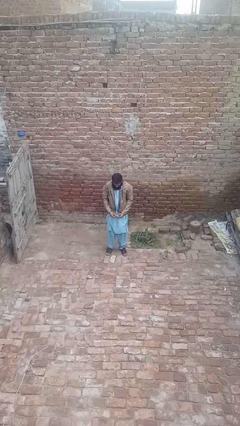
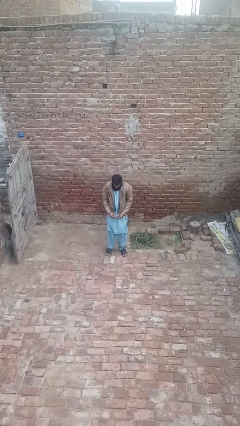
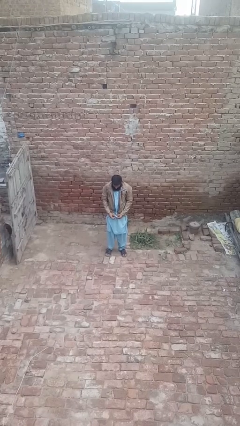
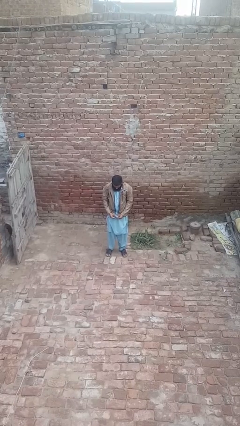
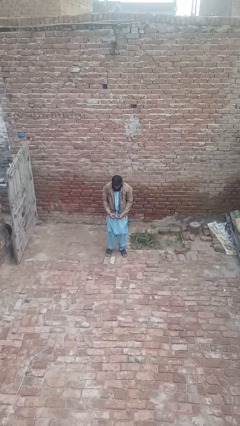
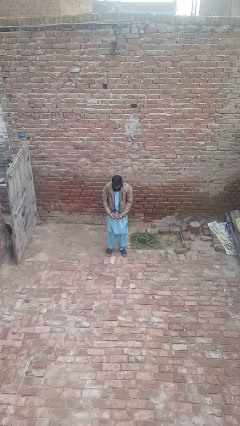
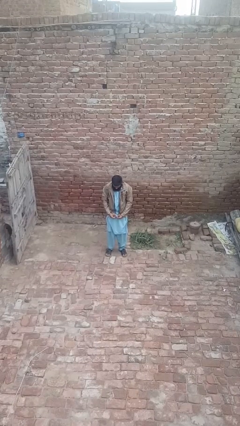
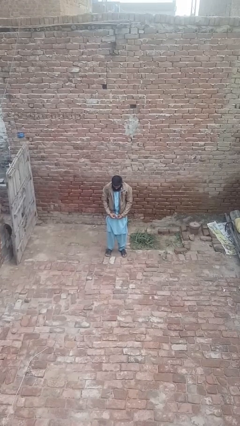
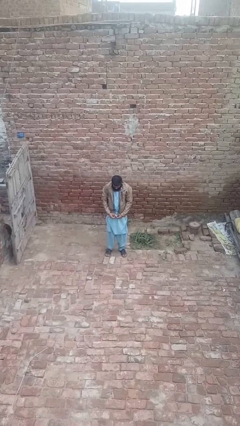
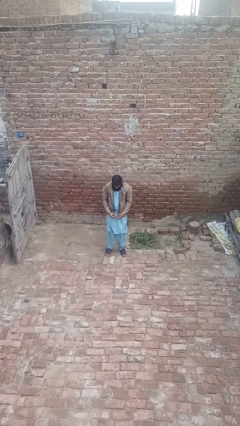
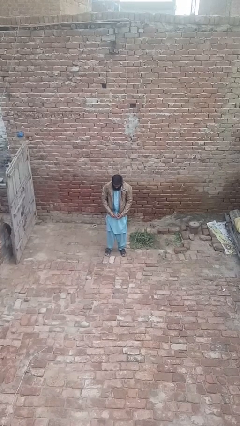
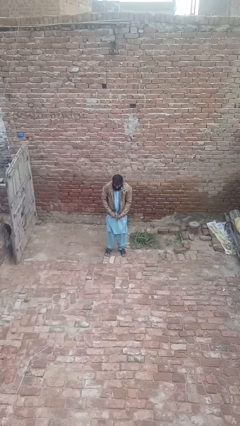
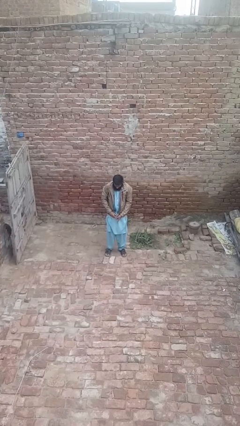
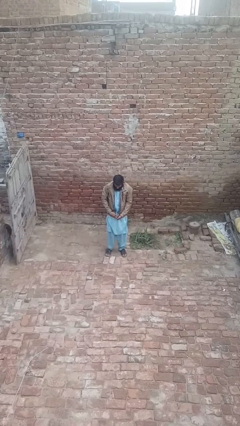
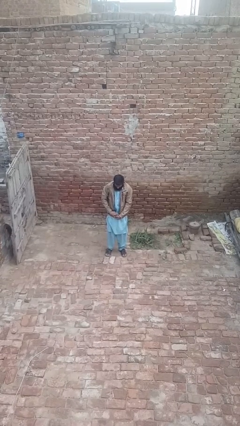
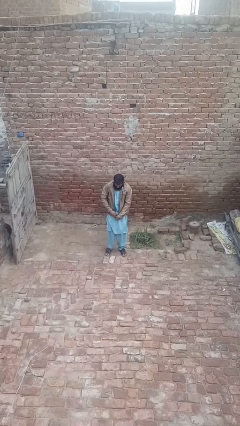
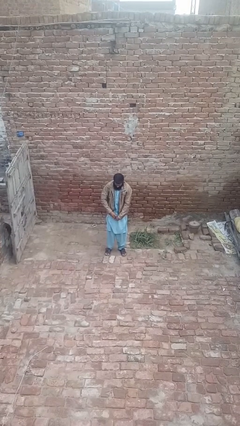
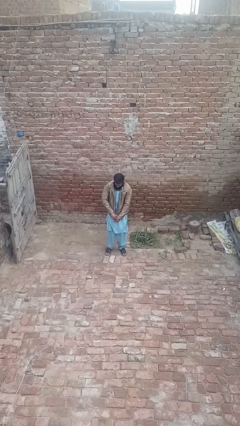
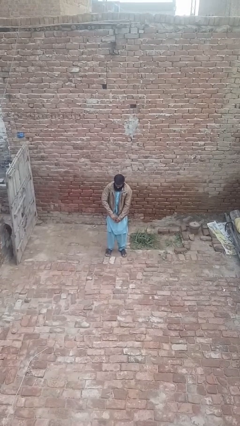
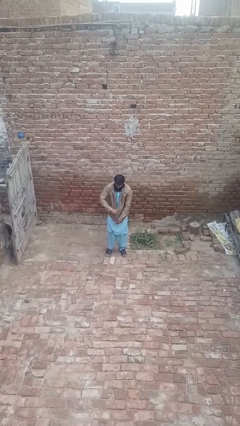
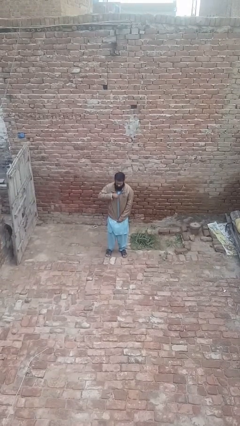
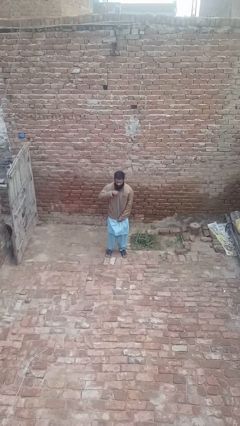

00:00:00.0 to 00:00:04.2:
person zips up jacket

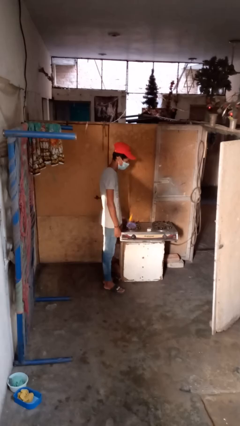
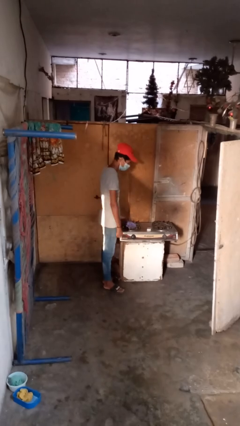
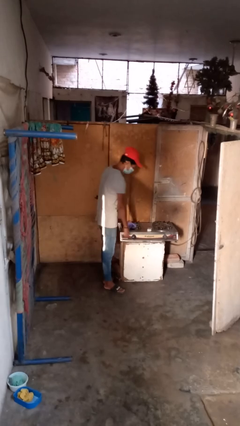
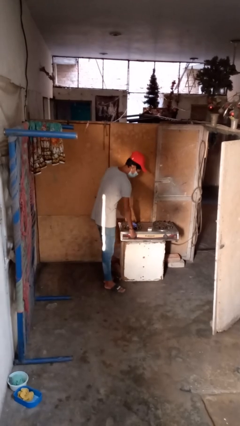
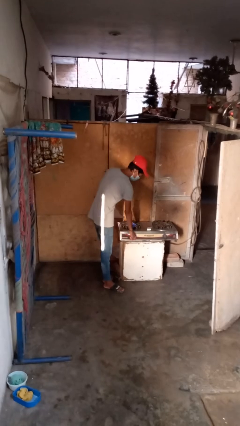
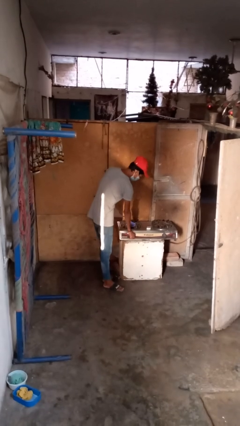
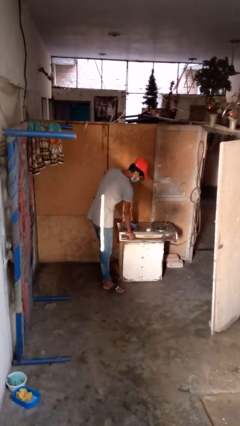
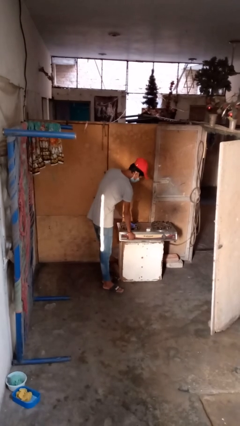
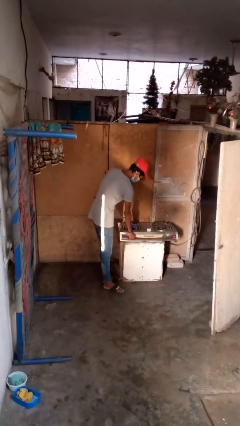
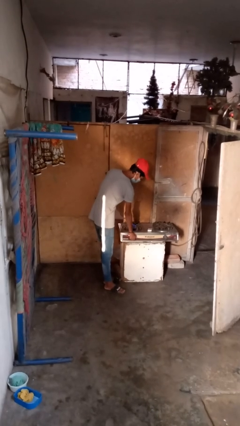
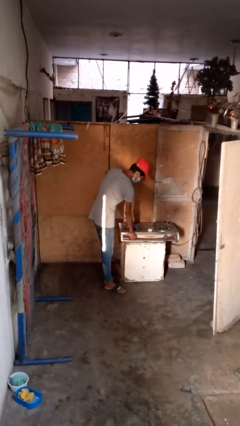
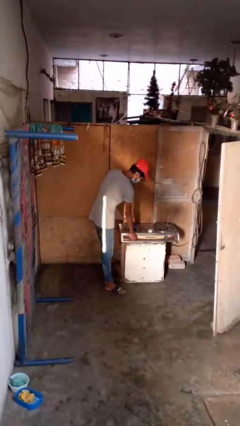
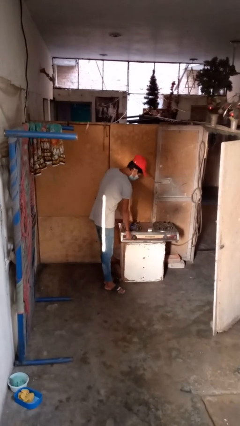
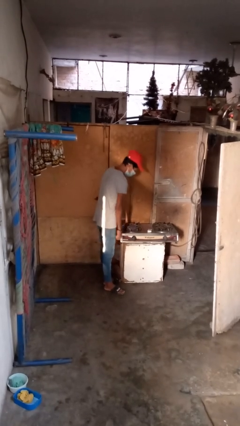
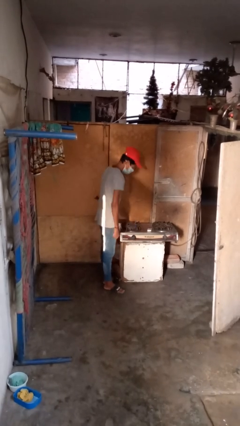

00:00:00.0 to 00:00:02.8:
person turns off stovetop

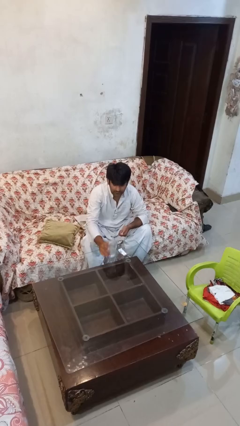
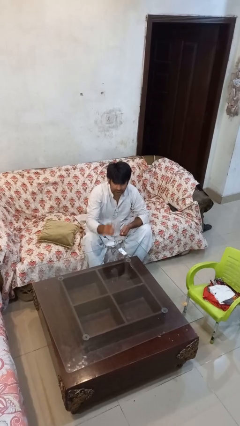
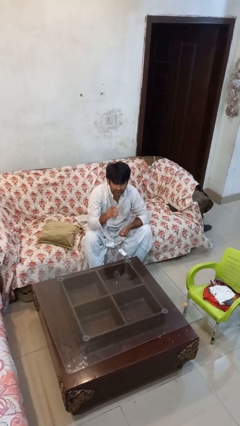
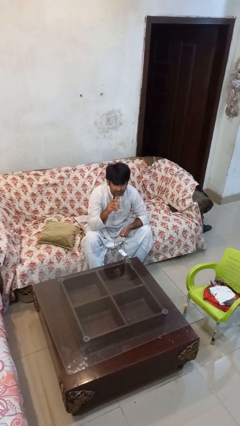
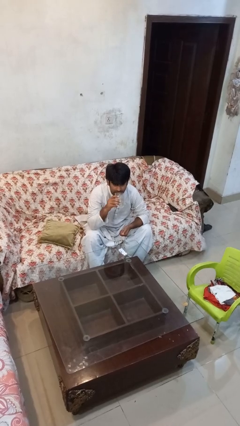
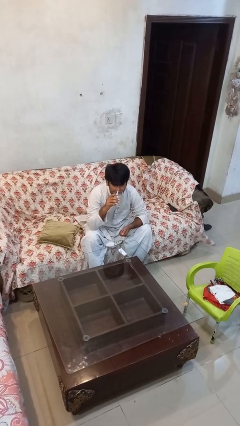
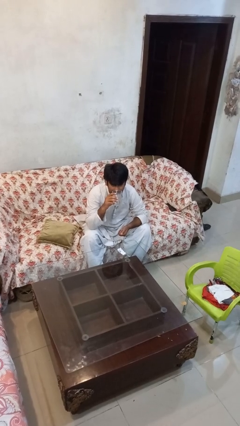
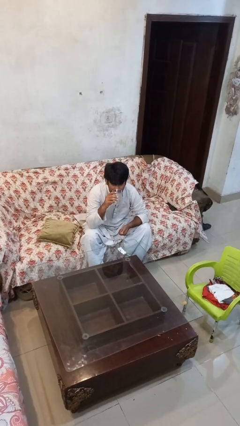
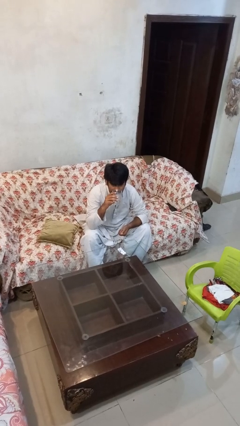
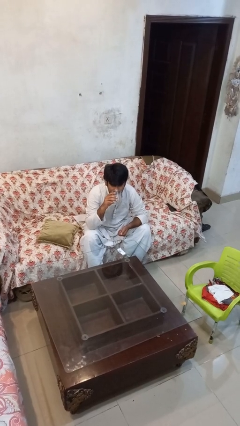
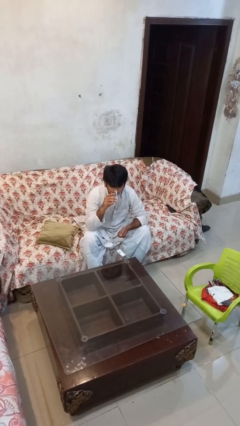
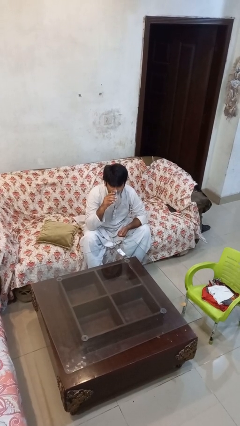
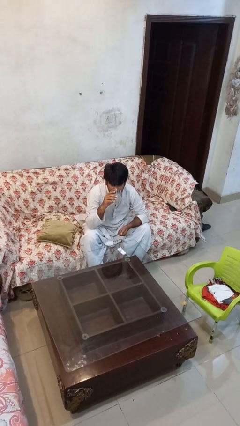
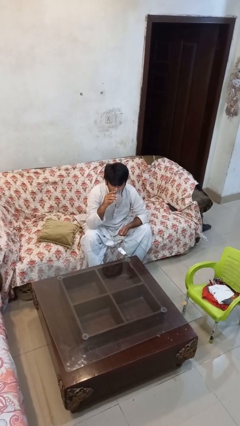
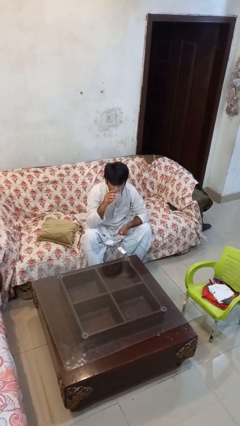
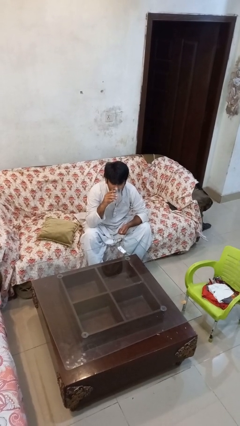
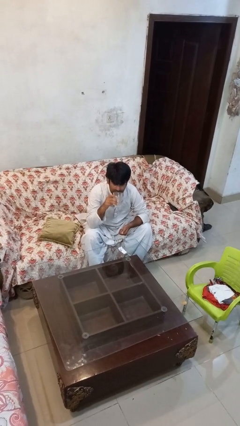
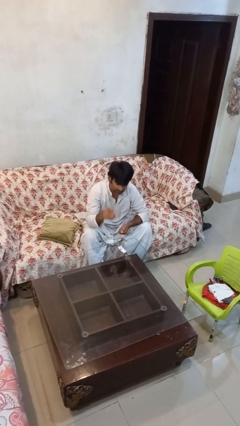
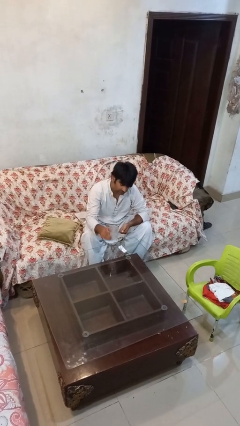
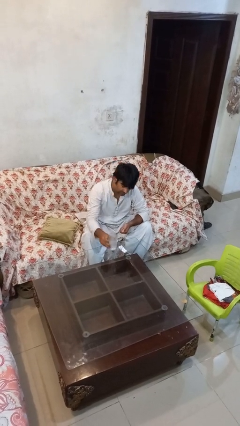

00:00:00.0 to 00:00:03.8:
person drinks from cup

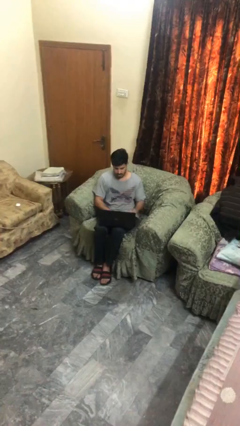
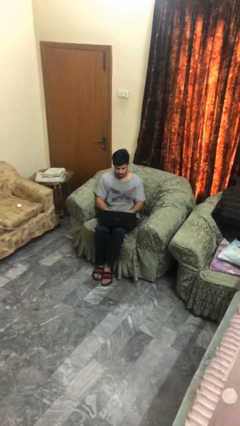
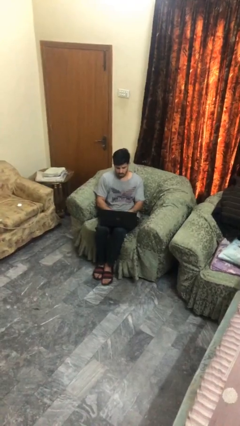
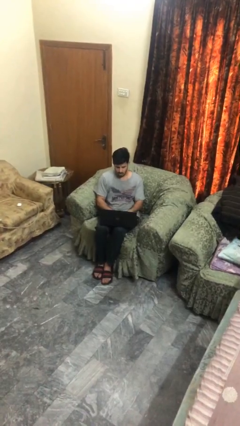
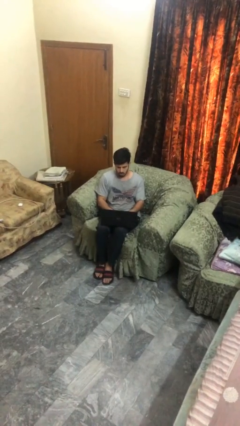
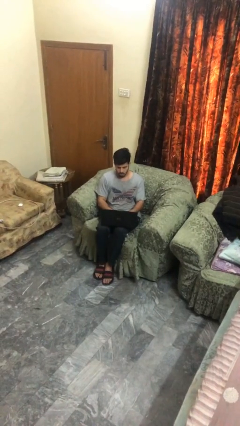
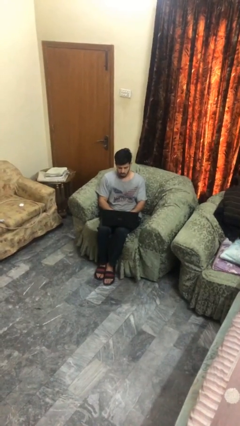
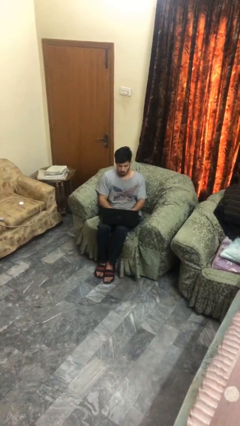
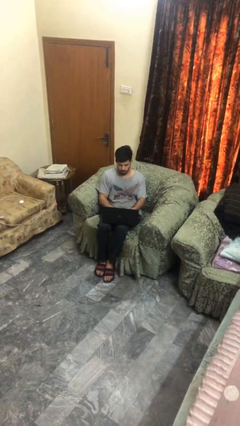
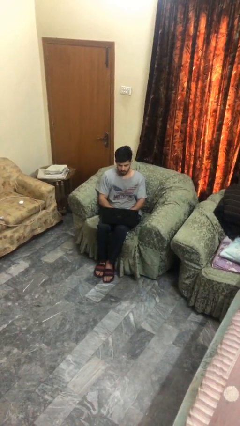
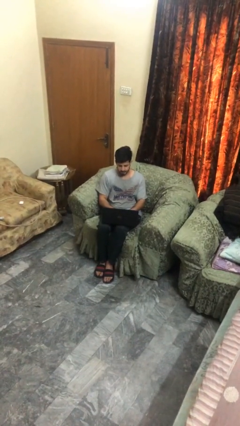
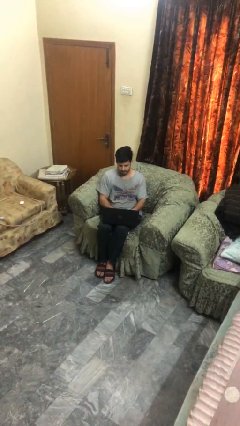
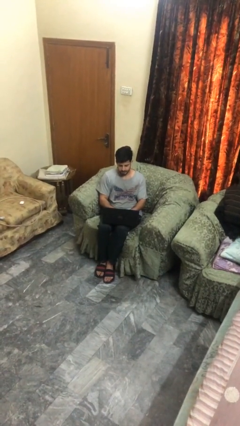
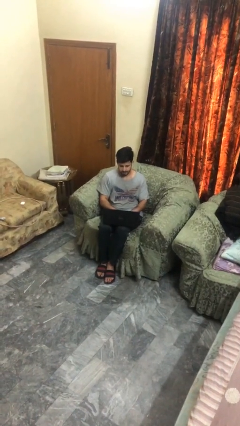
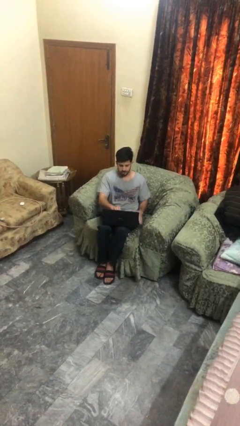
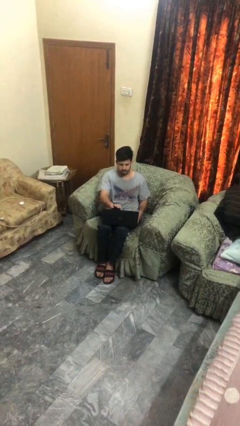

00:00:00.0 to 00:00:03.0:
person interacts with laptop

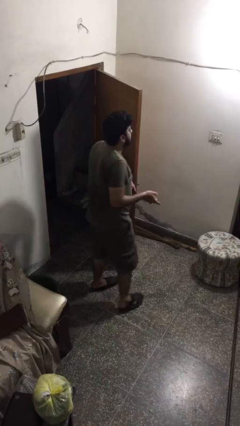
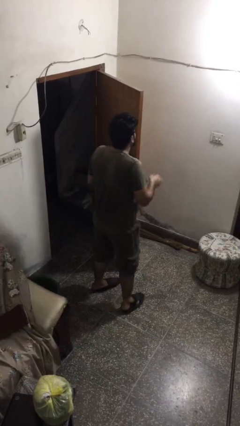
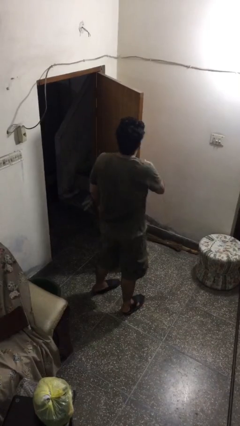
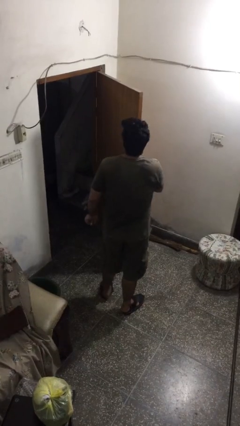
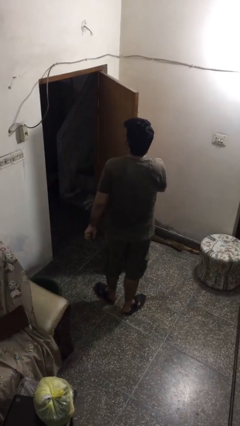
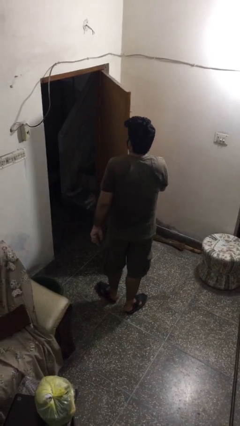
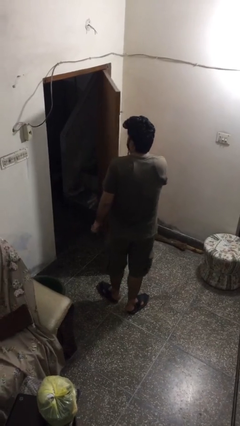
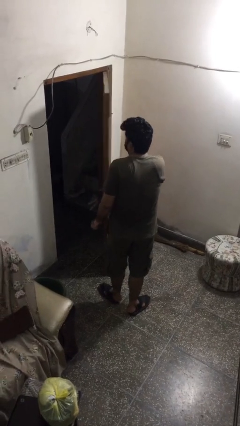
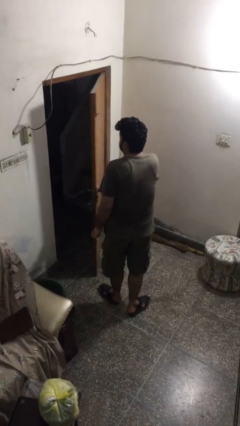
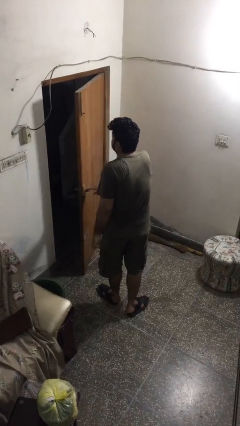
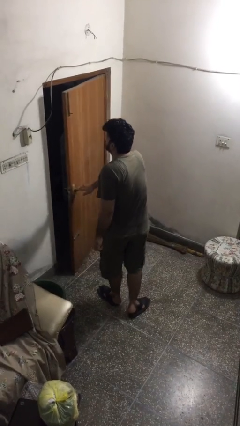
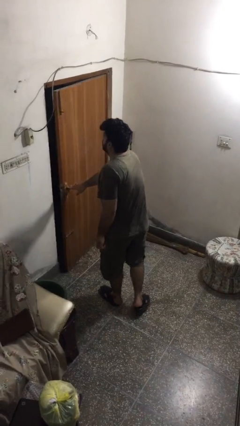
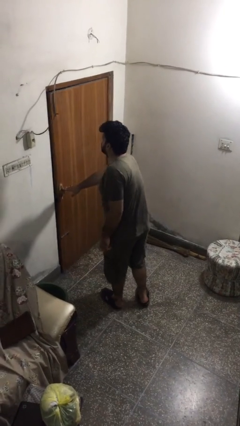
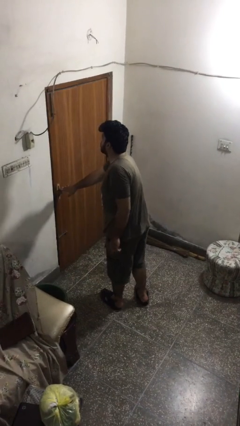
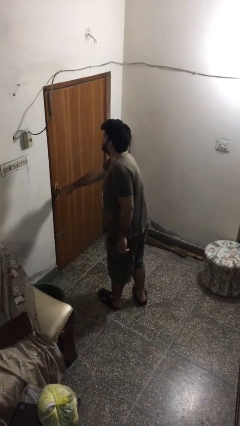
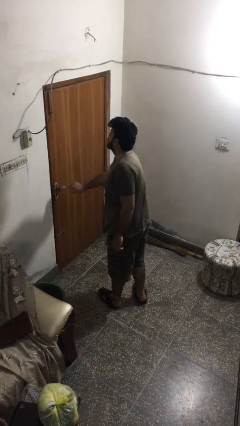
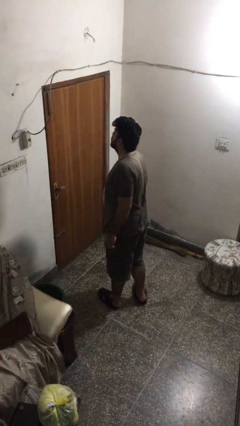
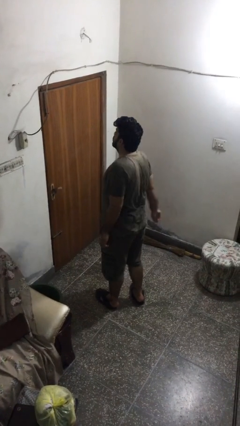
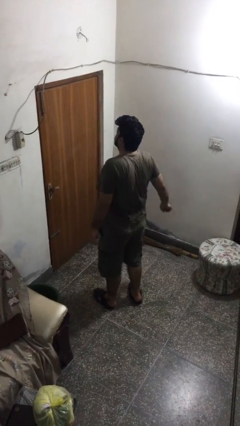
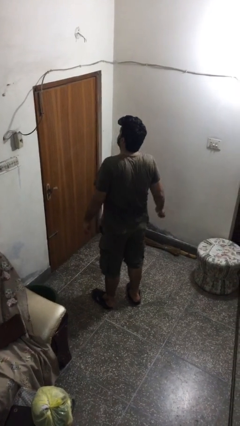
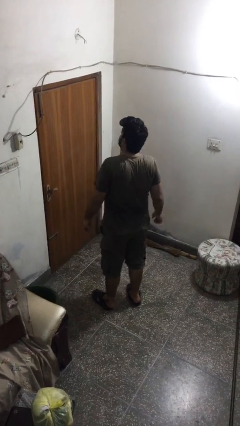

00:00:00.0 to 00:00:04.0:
person closes facility door
